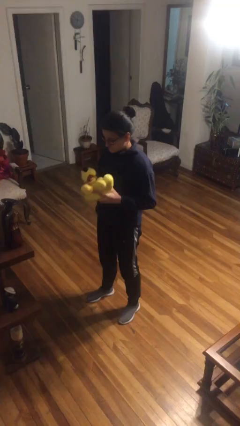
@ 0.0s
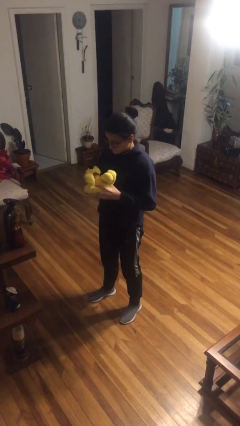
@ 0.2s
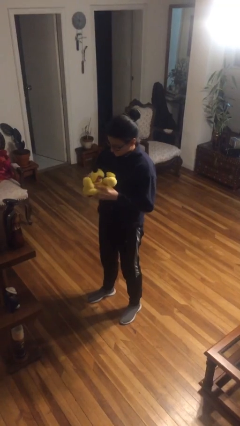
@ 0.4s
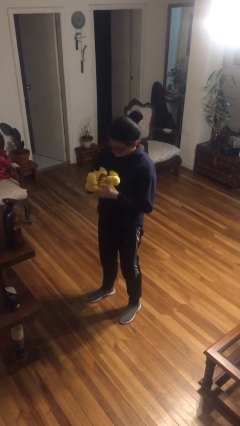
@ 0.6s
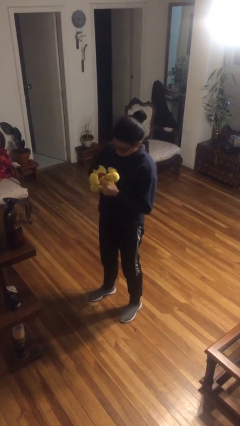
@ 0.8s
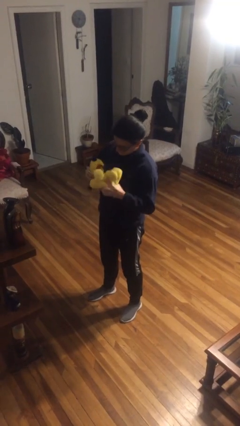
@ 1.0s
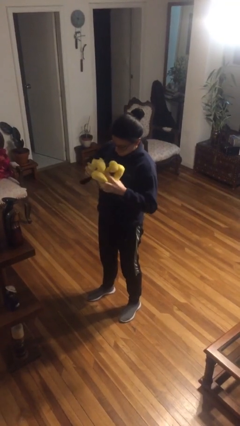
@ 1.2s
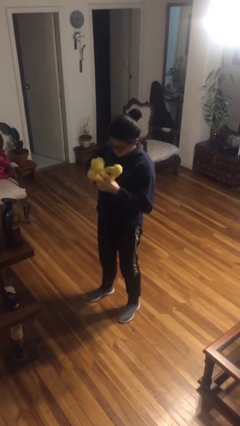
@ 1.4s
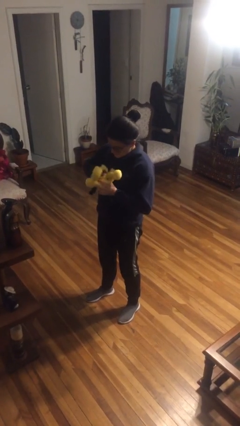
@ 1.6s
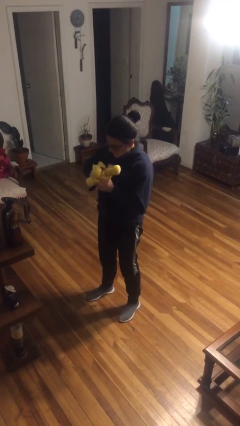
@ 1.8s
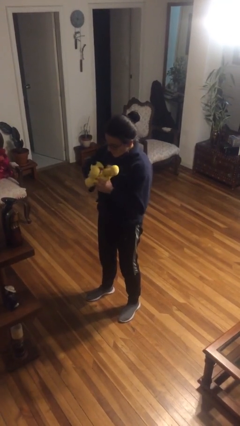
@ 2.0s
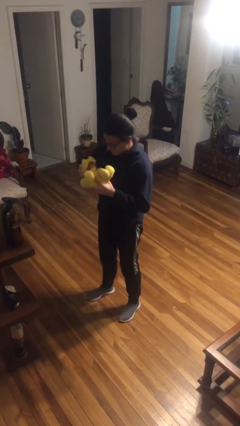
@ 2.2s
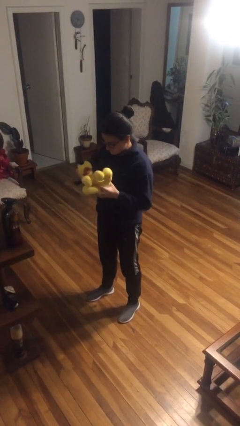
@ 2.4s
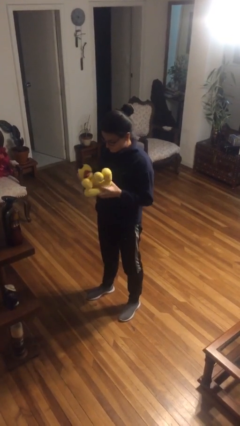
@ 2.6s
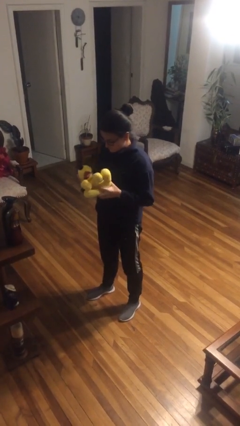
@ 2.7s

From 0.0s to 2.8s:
person squeezes object

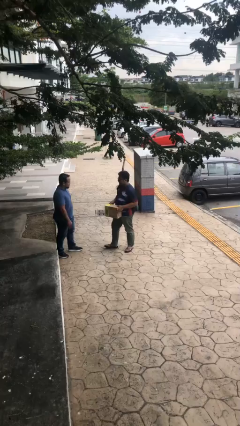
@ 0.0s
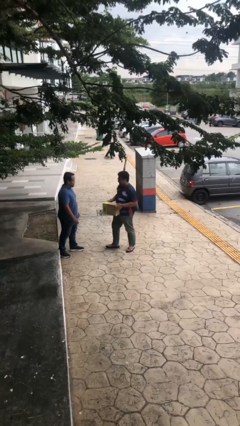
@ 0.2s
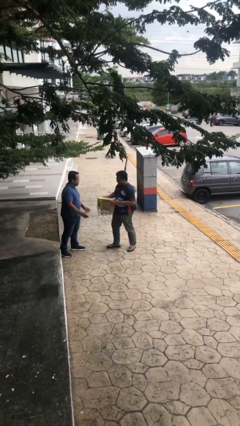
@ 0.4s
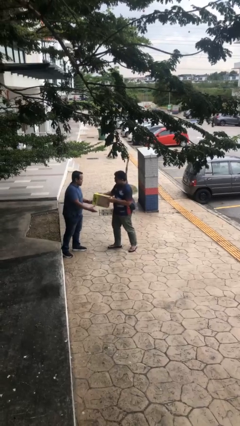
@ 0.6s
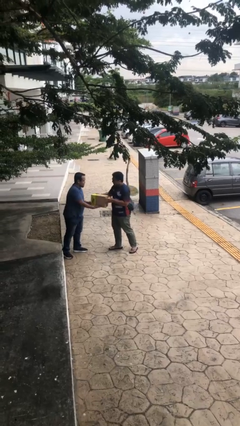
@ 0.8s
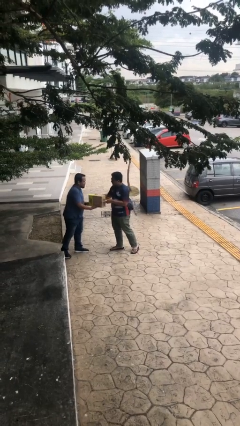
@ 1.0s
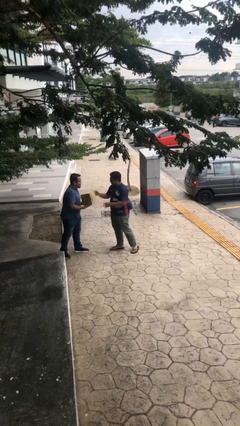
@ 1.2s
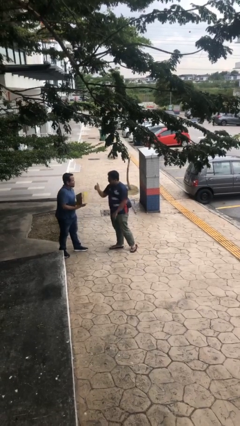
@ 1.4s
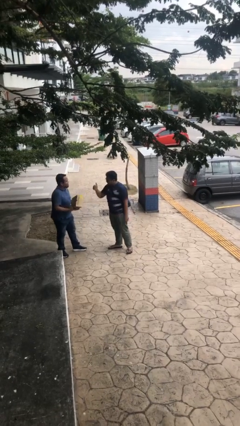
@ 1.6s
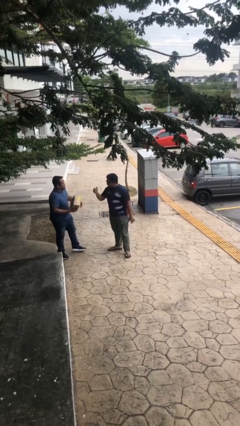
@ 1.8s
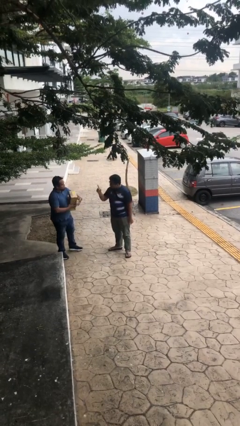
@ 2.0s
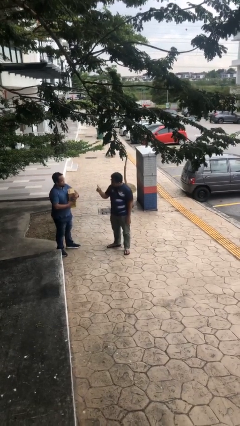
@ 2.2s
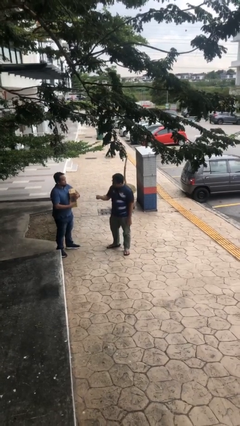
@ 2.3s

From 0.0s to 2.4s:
person transfers object to person

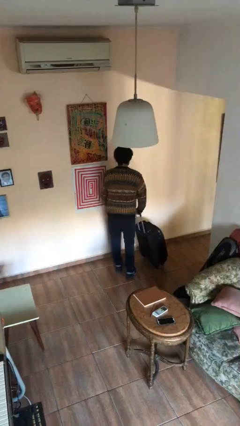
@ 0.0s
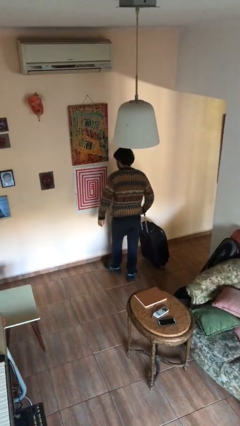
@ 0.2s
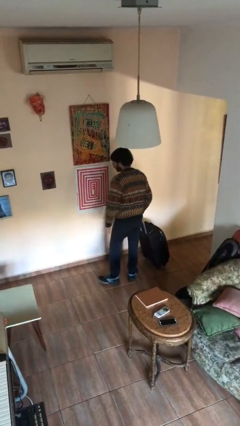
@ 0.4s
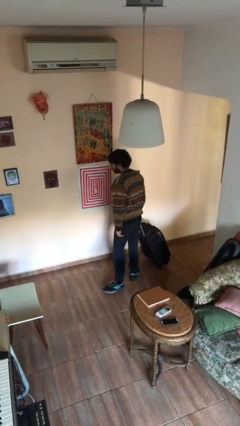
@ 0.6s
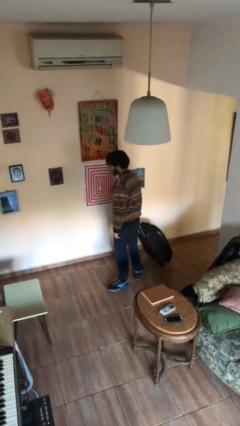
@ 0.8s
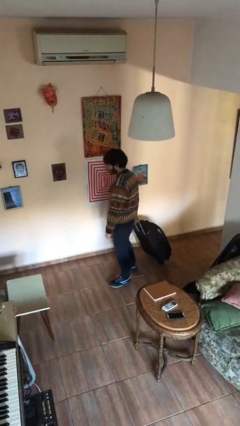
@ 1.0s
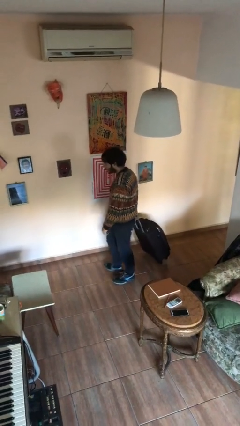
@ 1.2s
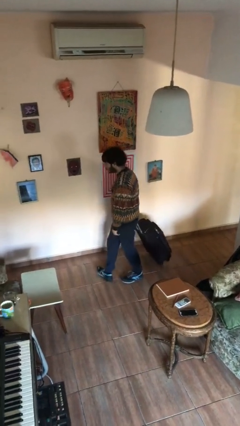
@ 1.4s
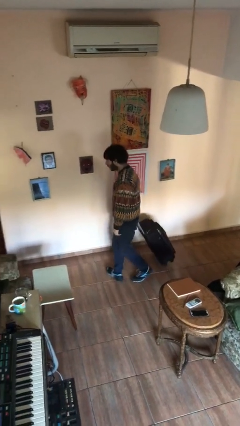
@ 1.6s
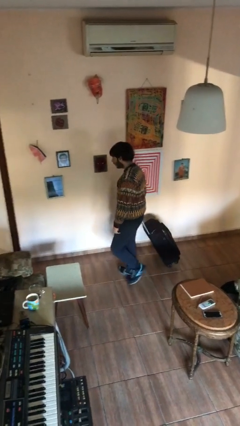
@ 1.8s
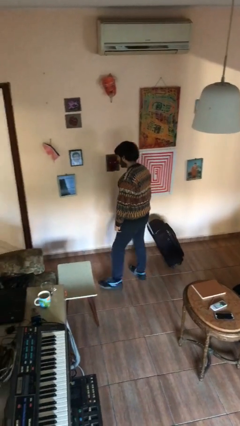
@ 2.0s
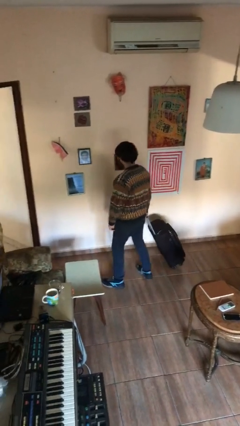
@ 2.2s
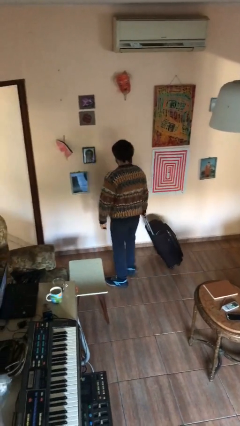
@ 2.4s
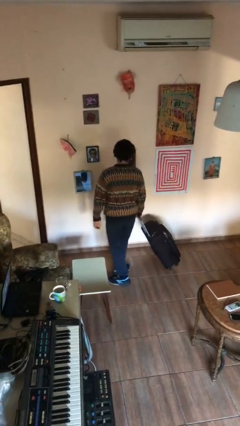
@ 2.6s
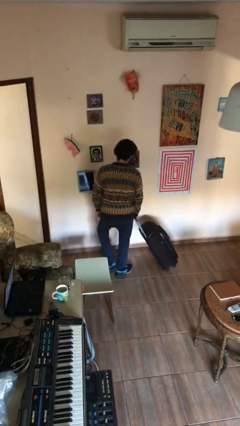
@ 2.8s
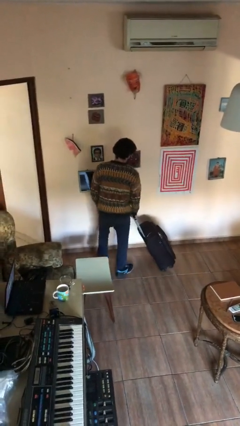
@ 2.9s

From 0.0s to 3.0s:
person pulls wheeled cart

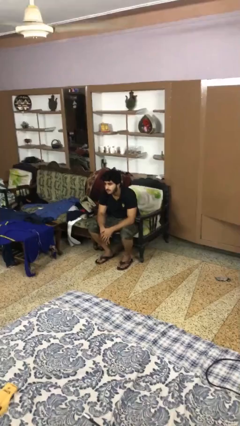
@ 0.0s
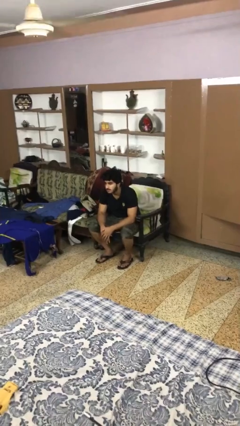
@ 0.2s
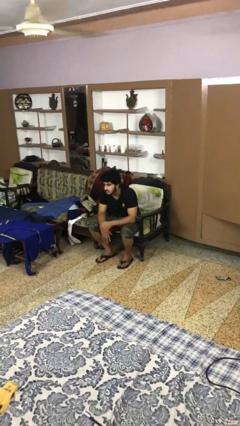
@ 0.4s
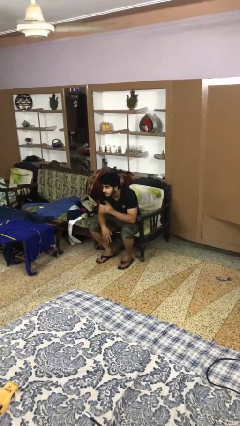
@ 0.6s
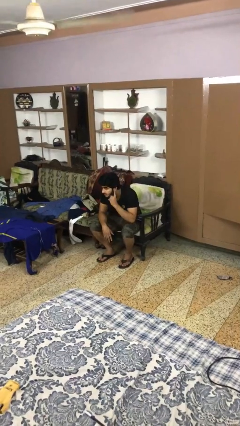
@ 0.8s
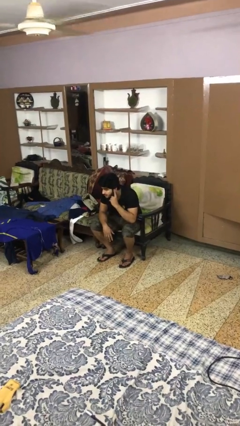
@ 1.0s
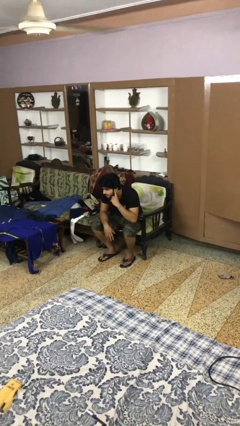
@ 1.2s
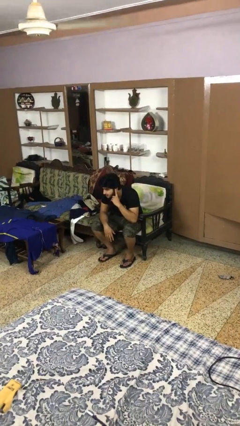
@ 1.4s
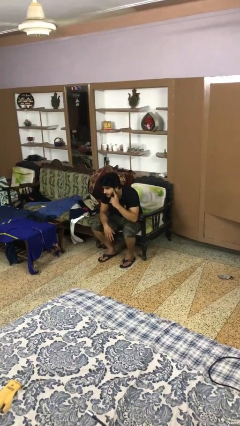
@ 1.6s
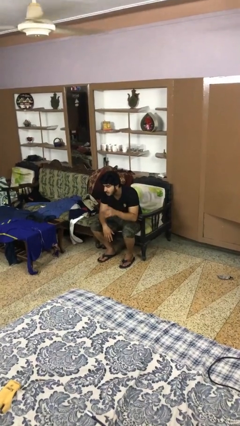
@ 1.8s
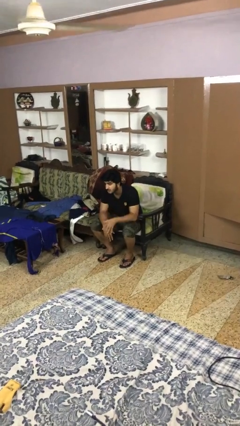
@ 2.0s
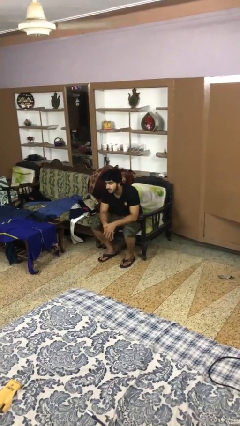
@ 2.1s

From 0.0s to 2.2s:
person gestures listen closely

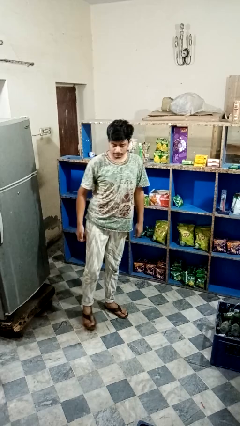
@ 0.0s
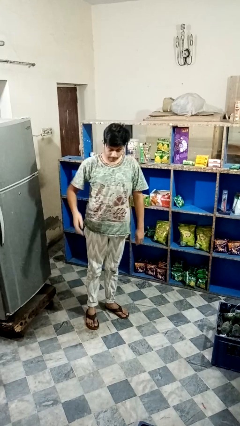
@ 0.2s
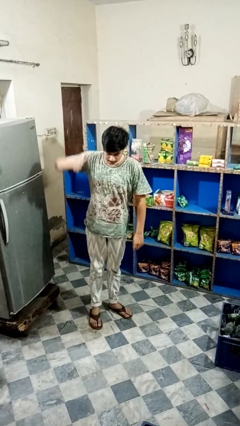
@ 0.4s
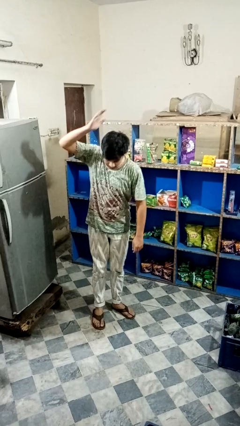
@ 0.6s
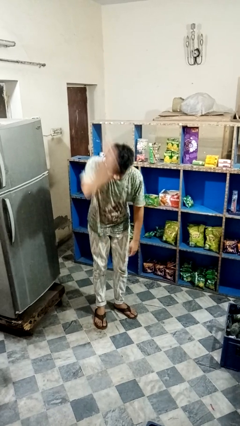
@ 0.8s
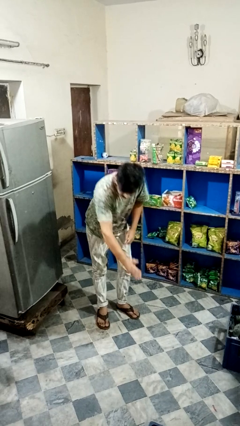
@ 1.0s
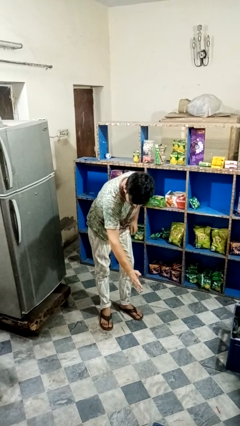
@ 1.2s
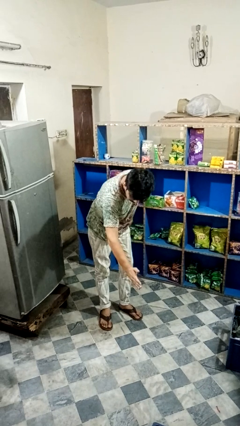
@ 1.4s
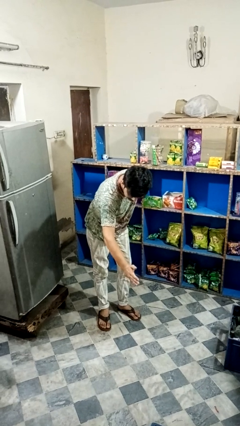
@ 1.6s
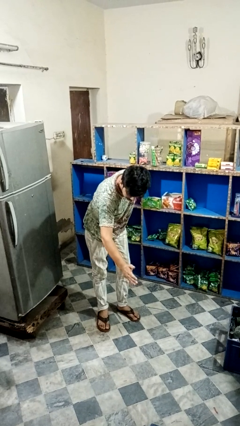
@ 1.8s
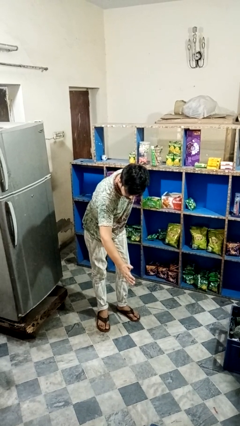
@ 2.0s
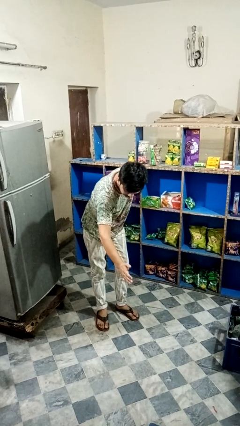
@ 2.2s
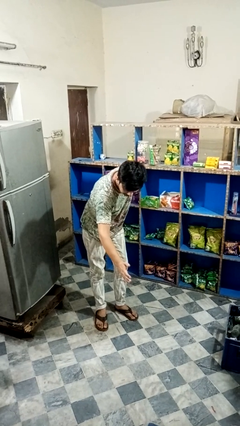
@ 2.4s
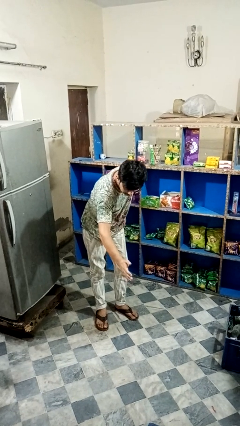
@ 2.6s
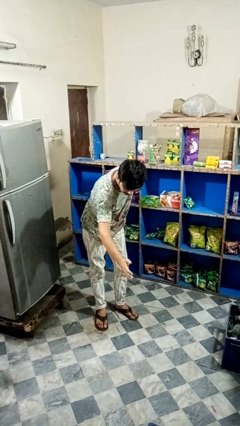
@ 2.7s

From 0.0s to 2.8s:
person karate chop

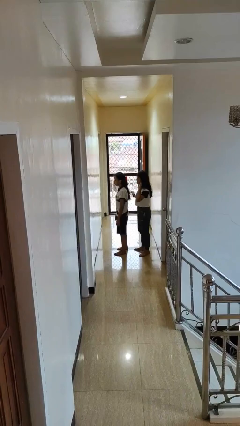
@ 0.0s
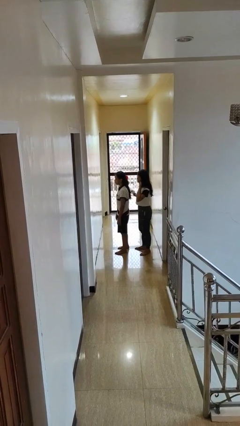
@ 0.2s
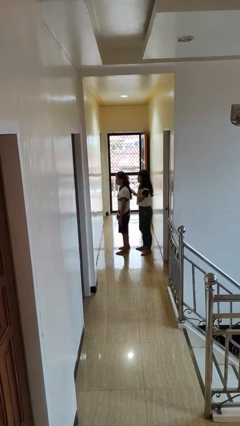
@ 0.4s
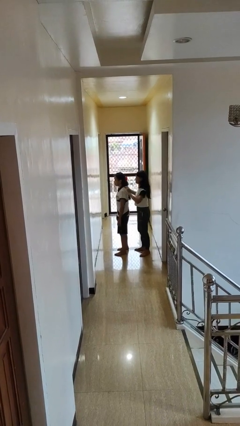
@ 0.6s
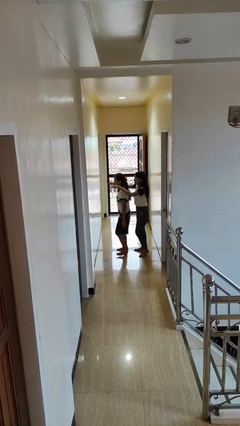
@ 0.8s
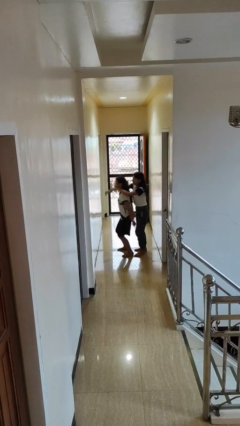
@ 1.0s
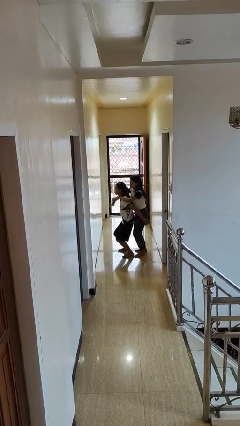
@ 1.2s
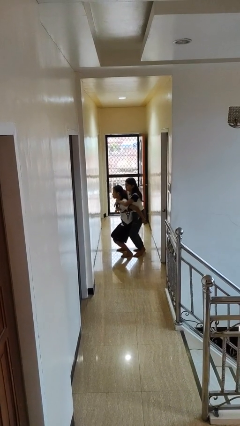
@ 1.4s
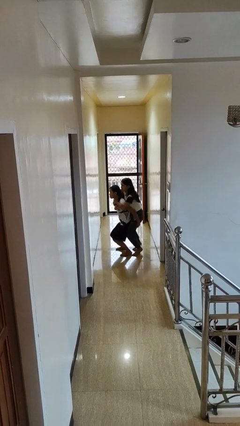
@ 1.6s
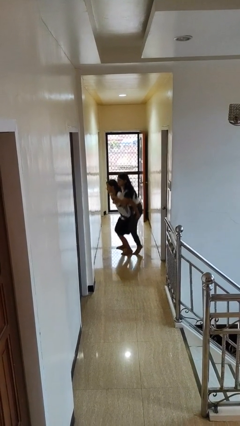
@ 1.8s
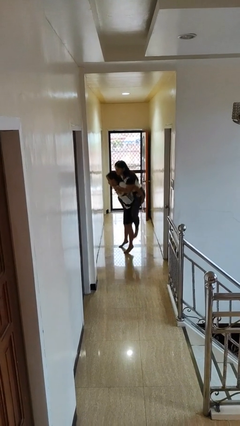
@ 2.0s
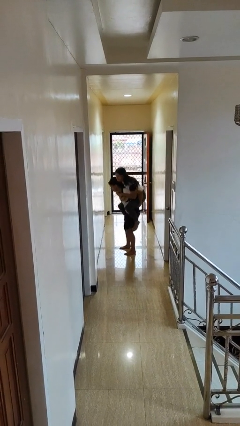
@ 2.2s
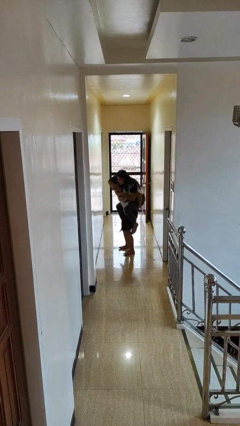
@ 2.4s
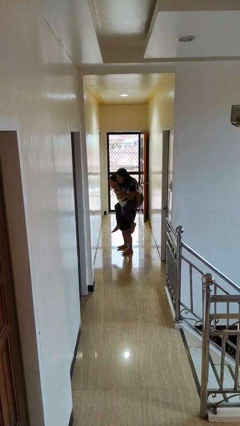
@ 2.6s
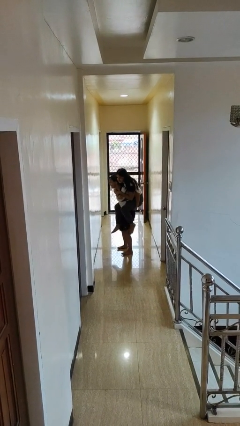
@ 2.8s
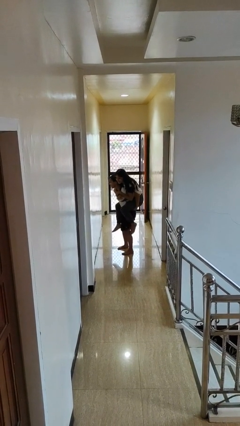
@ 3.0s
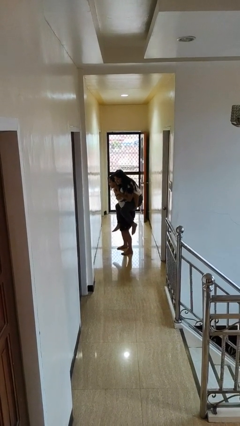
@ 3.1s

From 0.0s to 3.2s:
person carries person over shoulder

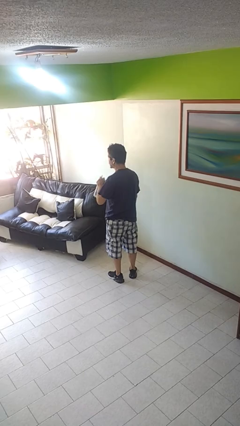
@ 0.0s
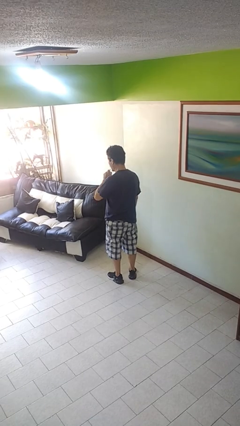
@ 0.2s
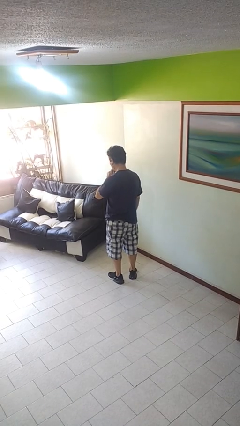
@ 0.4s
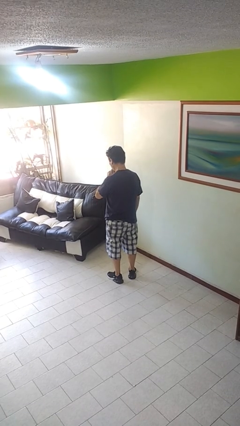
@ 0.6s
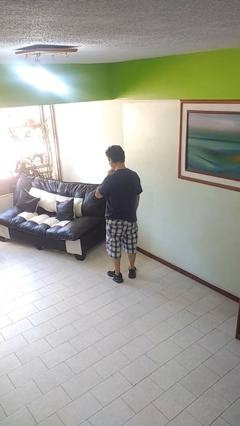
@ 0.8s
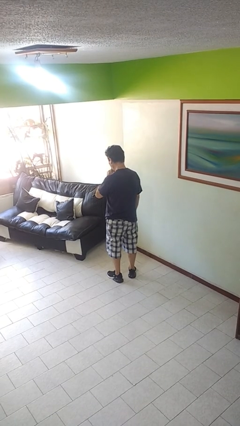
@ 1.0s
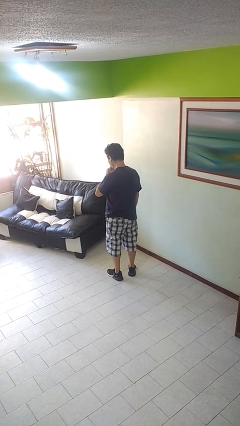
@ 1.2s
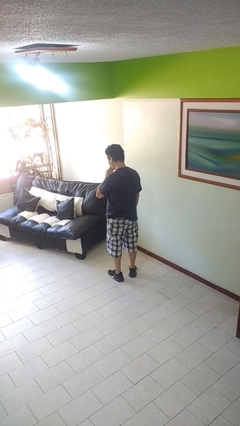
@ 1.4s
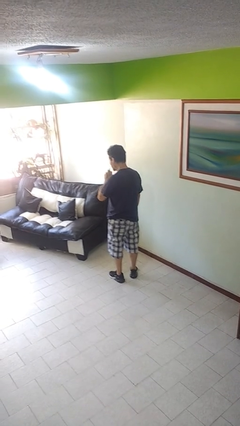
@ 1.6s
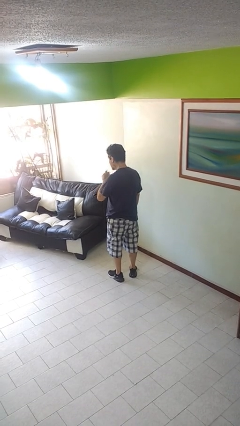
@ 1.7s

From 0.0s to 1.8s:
person drinks from straw
